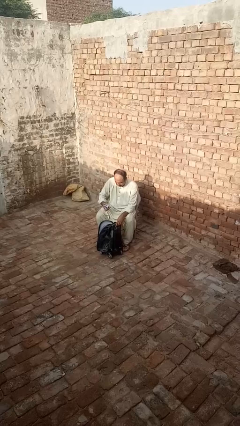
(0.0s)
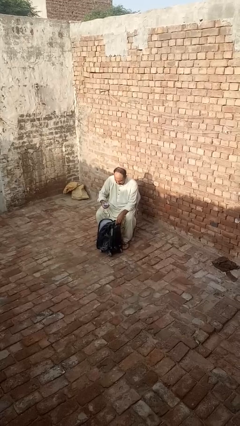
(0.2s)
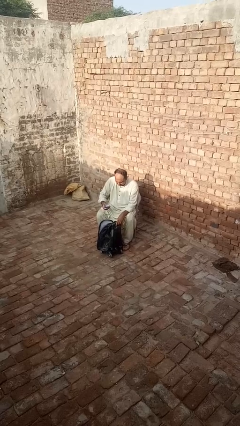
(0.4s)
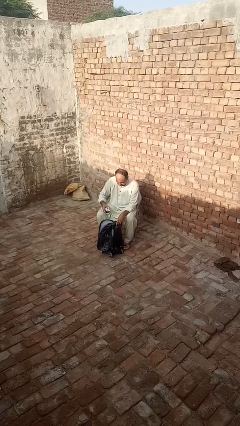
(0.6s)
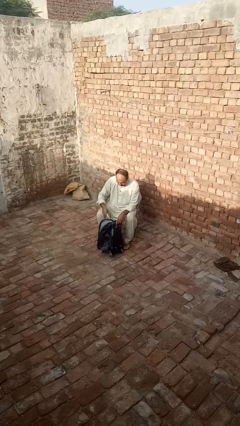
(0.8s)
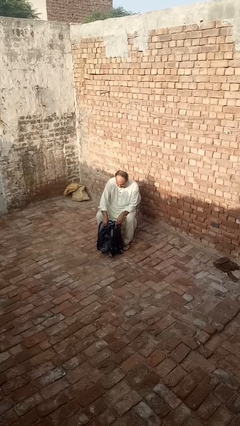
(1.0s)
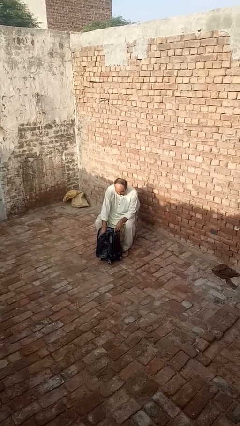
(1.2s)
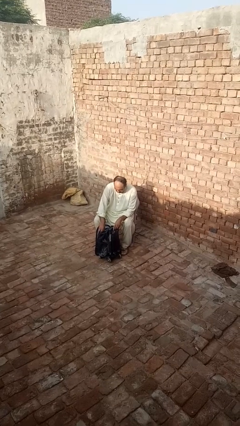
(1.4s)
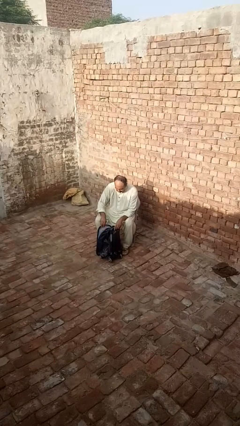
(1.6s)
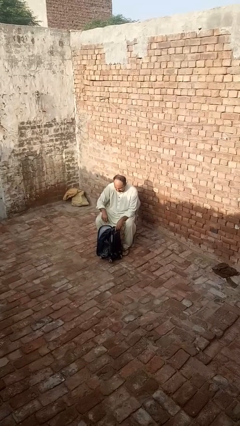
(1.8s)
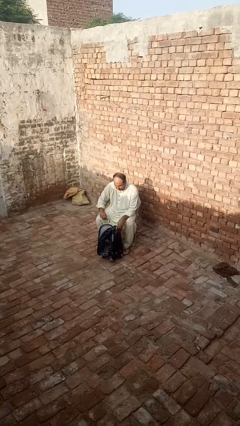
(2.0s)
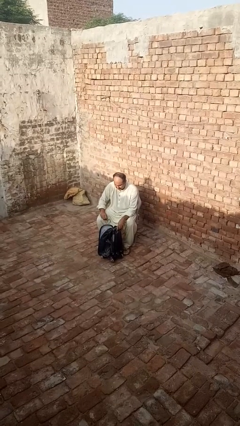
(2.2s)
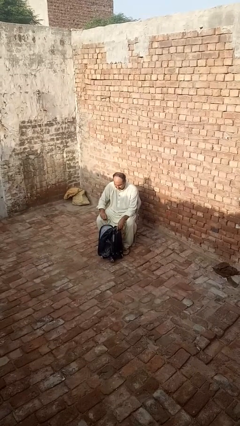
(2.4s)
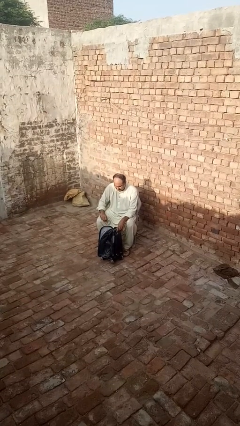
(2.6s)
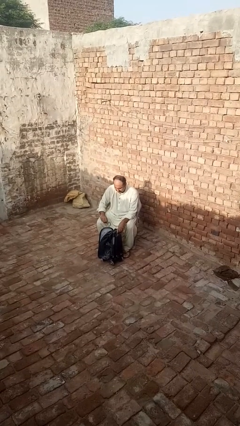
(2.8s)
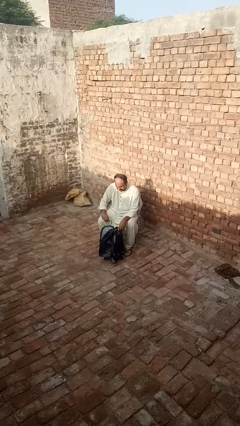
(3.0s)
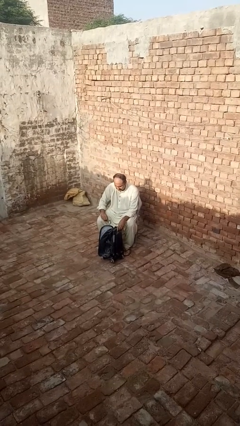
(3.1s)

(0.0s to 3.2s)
person puts object into backpack

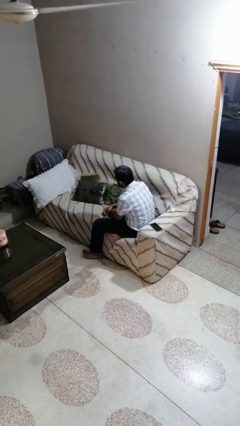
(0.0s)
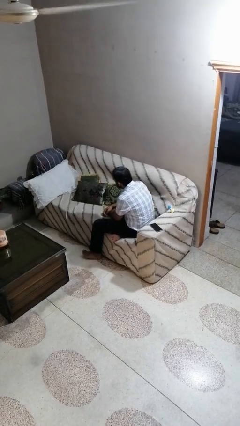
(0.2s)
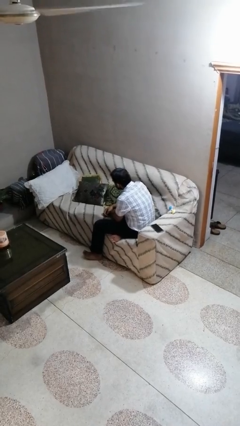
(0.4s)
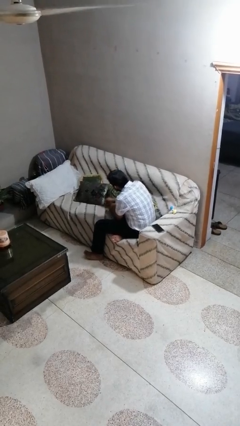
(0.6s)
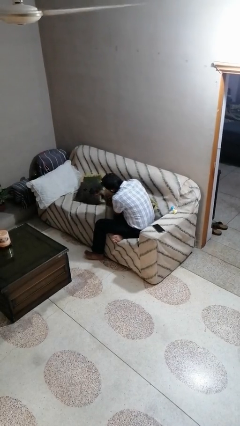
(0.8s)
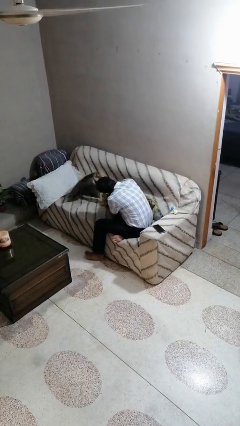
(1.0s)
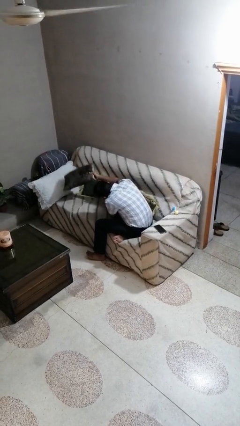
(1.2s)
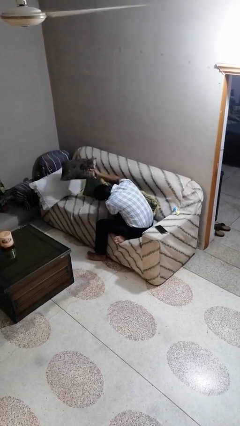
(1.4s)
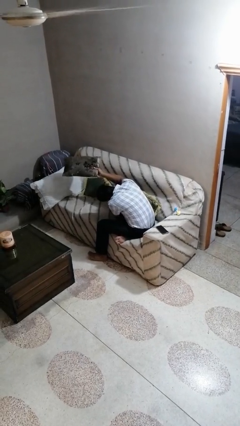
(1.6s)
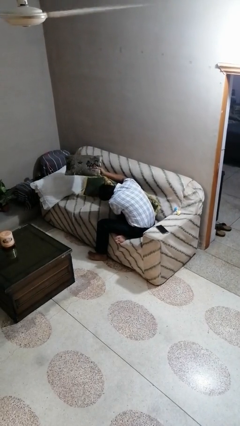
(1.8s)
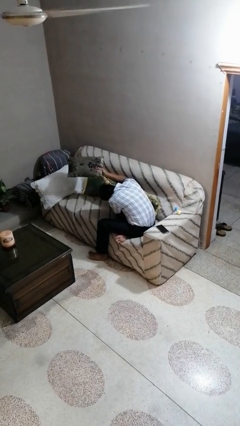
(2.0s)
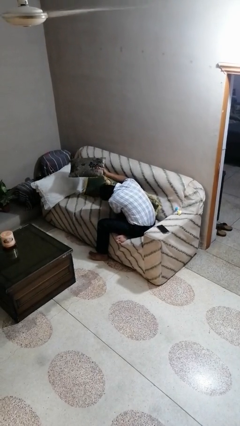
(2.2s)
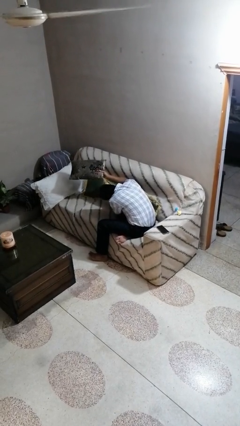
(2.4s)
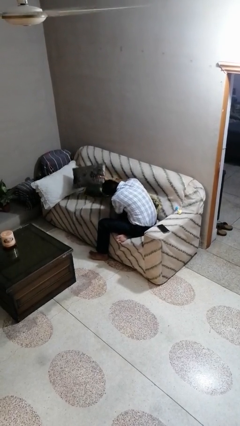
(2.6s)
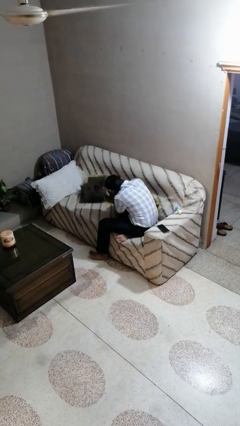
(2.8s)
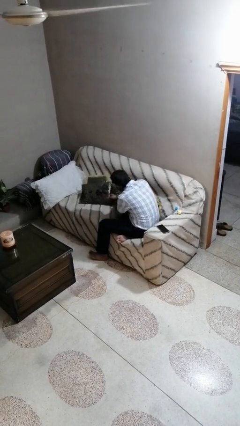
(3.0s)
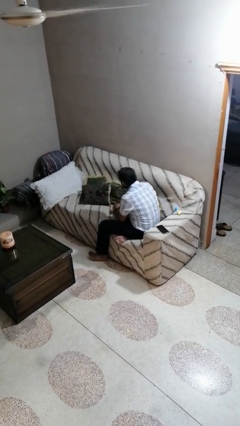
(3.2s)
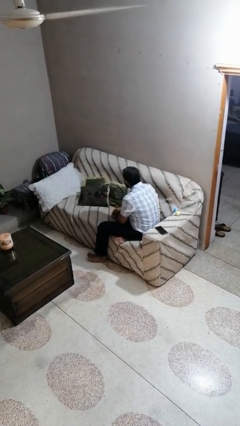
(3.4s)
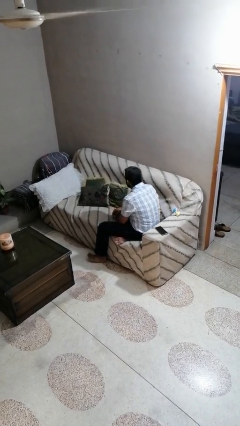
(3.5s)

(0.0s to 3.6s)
person searches in couch

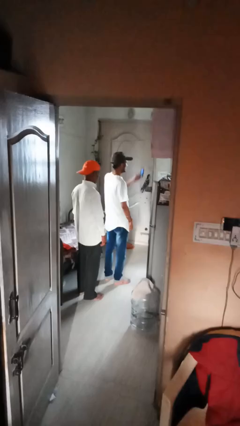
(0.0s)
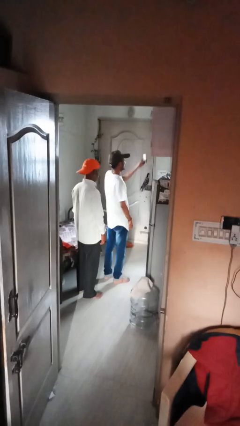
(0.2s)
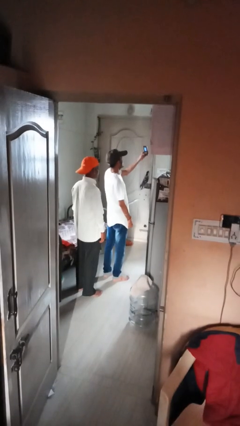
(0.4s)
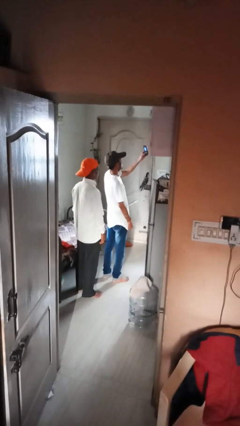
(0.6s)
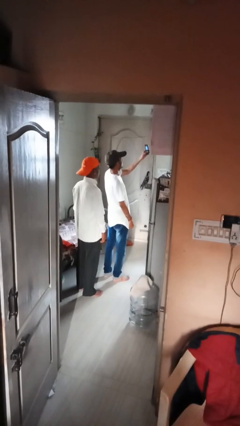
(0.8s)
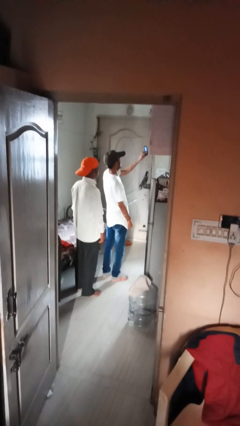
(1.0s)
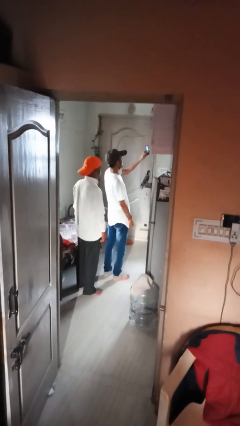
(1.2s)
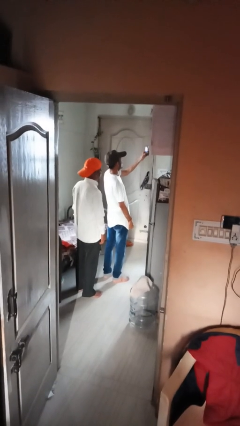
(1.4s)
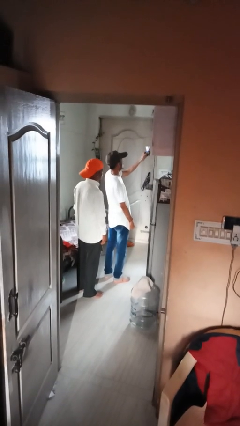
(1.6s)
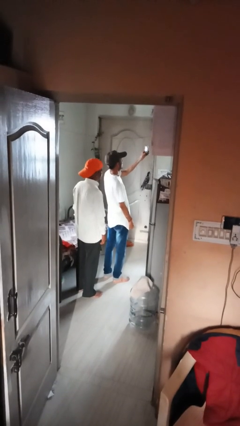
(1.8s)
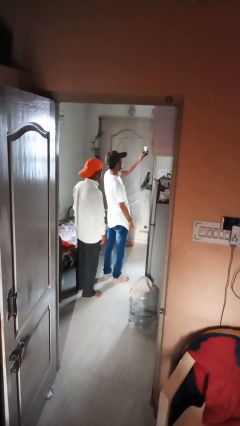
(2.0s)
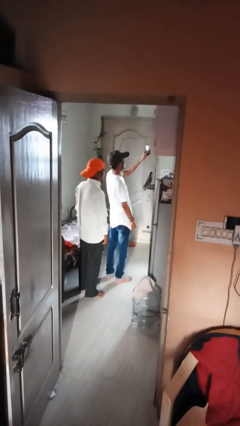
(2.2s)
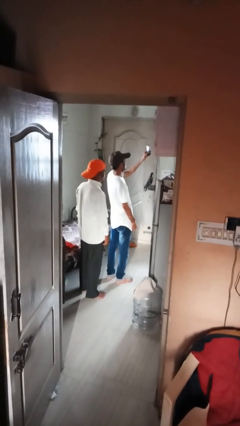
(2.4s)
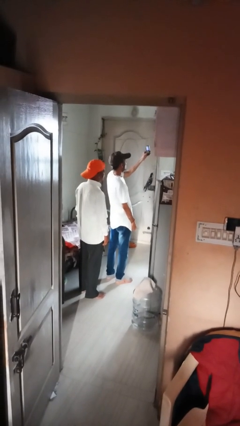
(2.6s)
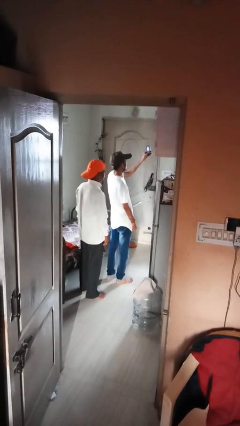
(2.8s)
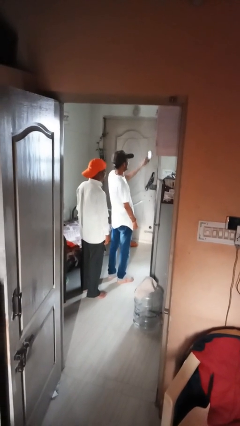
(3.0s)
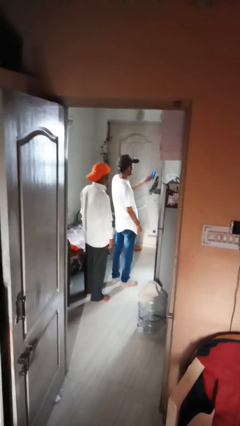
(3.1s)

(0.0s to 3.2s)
person takes selfie with person

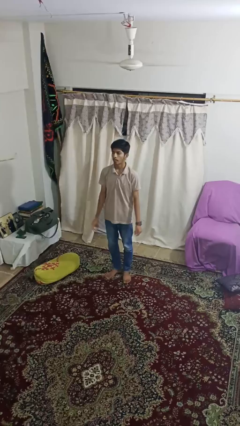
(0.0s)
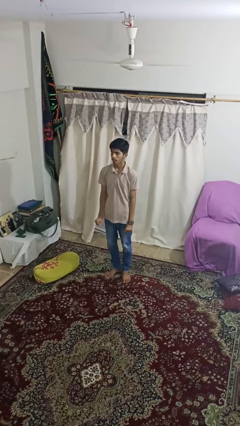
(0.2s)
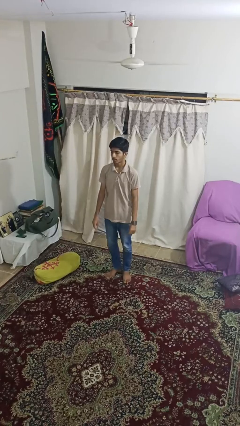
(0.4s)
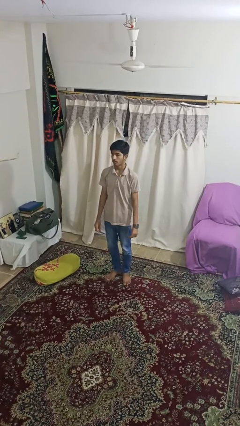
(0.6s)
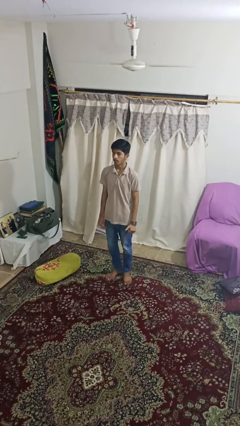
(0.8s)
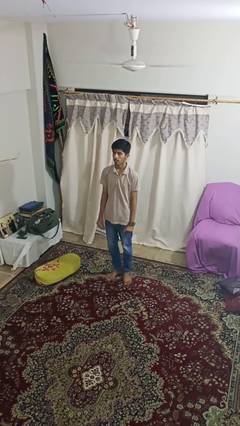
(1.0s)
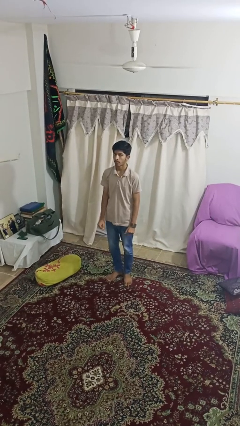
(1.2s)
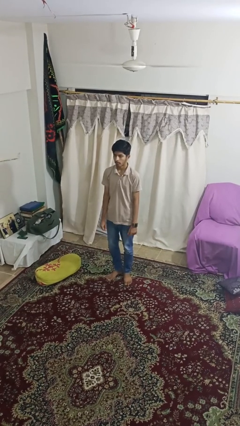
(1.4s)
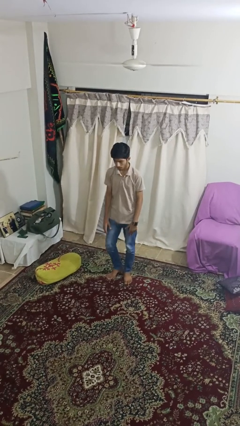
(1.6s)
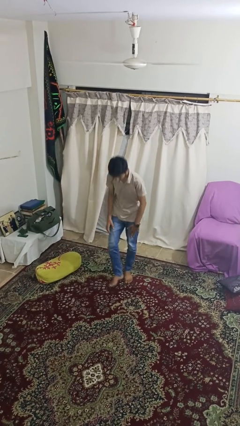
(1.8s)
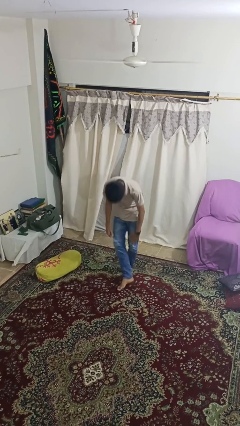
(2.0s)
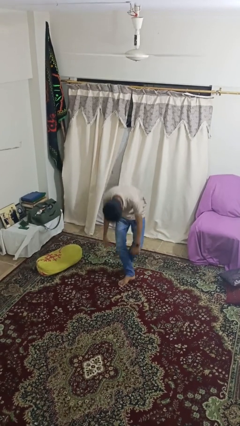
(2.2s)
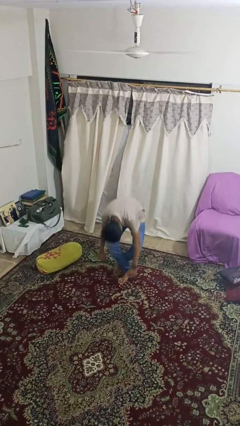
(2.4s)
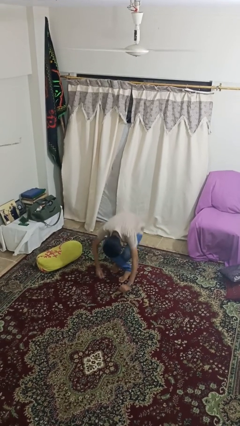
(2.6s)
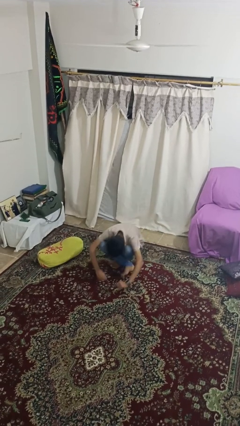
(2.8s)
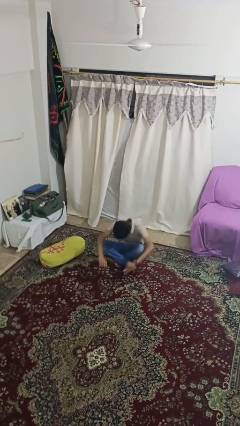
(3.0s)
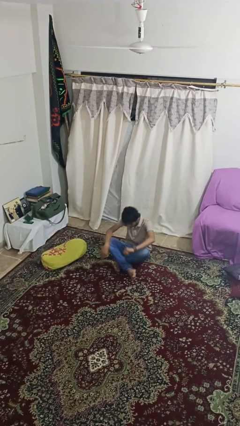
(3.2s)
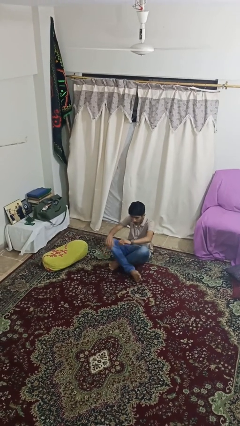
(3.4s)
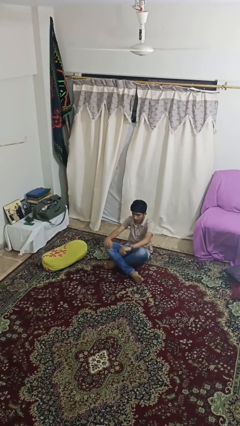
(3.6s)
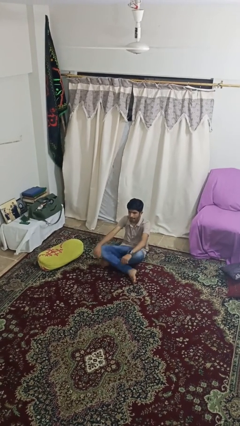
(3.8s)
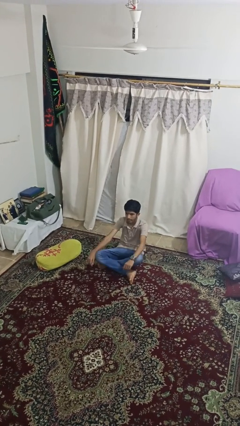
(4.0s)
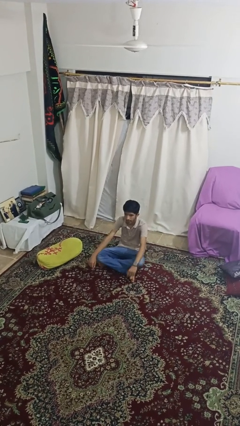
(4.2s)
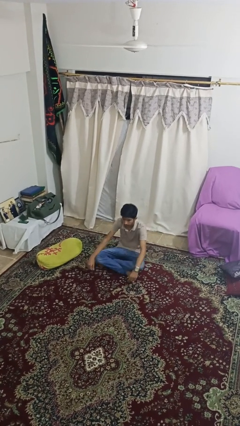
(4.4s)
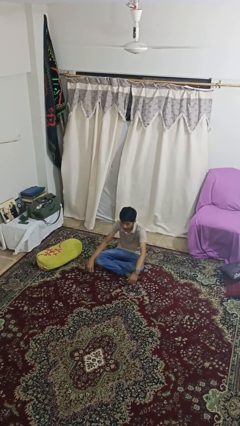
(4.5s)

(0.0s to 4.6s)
person sits crisscross

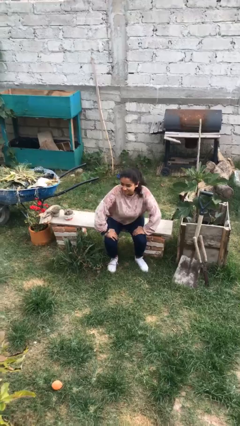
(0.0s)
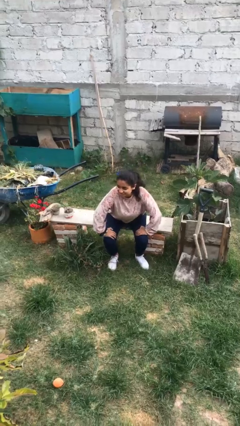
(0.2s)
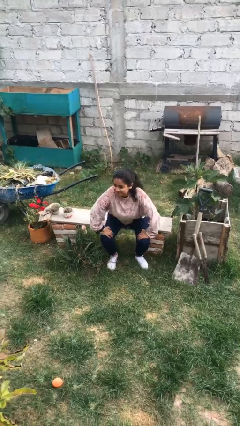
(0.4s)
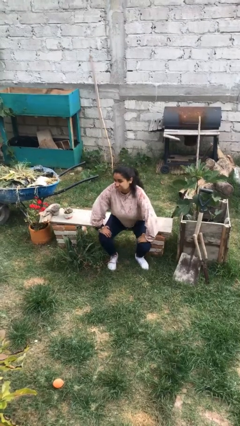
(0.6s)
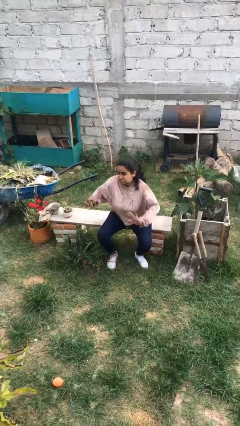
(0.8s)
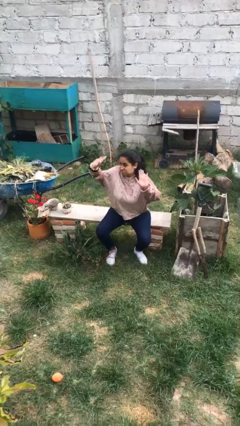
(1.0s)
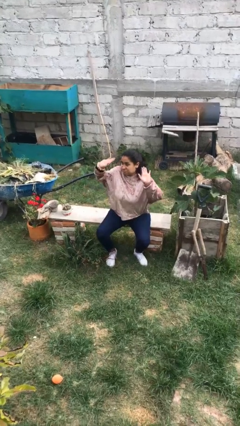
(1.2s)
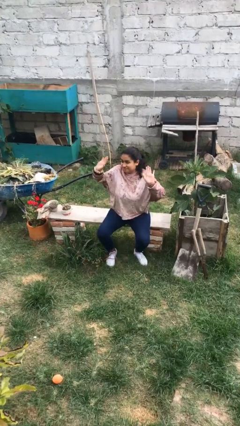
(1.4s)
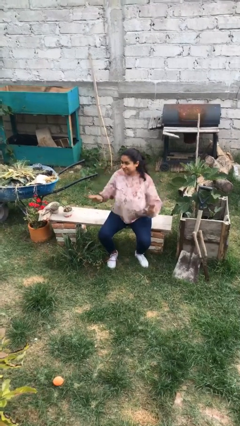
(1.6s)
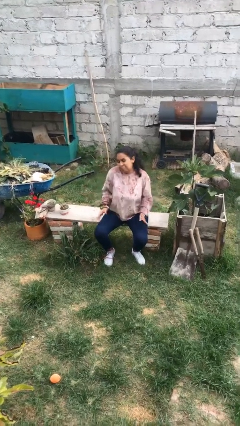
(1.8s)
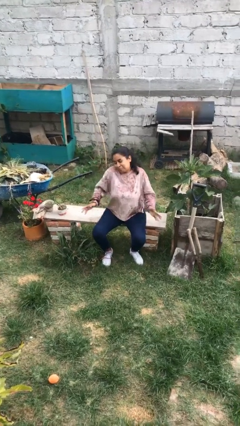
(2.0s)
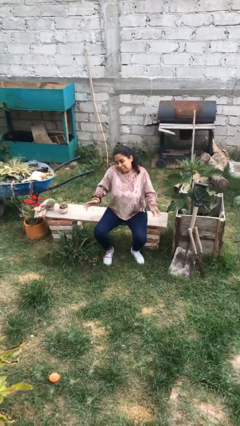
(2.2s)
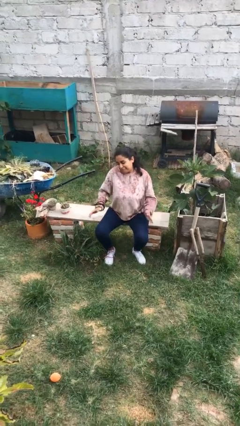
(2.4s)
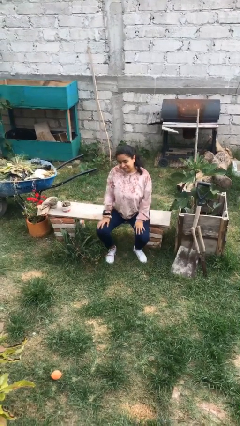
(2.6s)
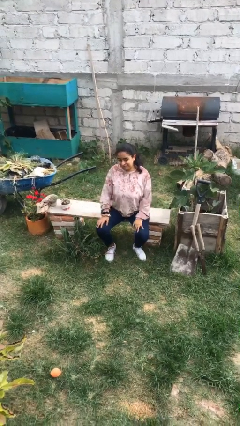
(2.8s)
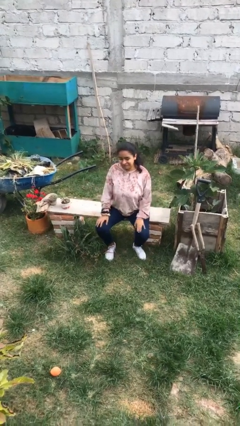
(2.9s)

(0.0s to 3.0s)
person shrugs
